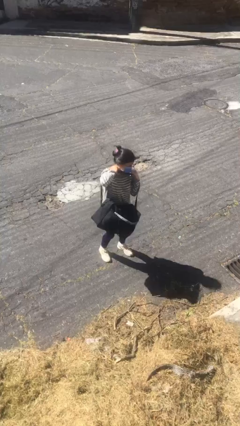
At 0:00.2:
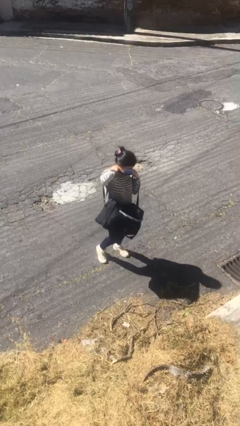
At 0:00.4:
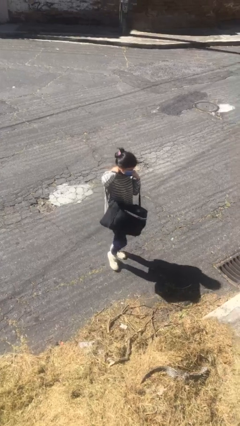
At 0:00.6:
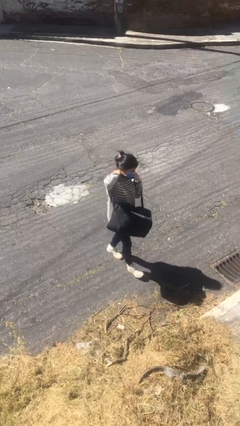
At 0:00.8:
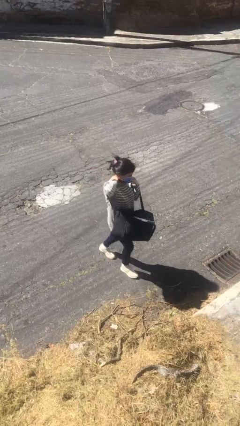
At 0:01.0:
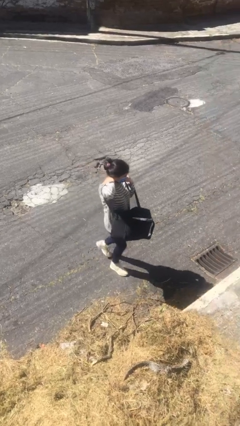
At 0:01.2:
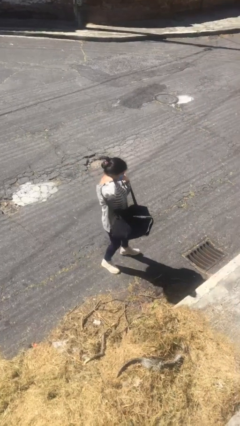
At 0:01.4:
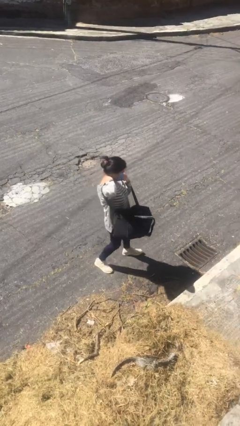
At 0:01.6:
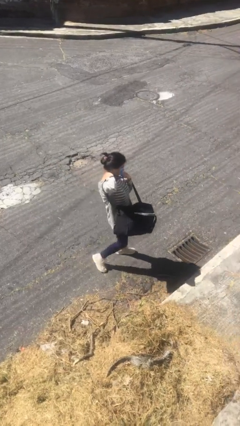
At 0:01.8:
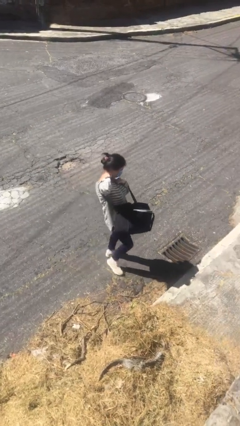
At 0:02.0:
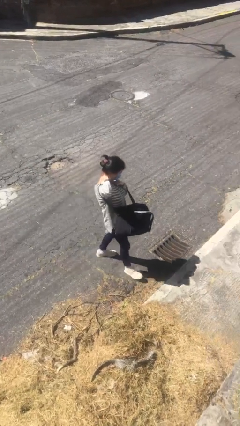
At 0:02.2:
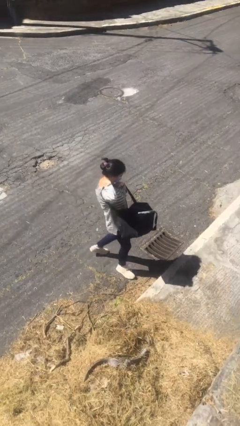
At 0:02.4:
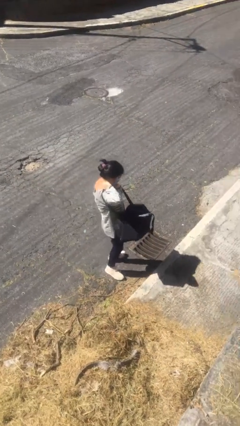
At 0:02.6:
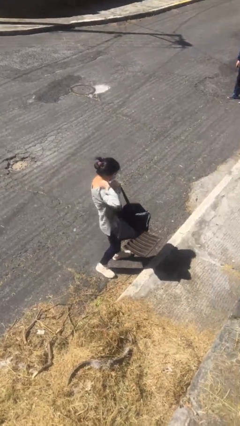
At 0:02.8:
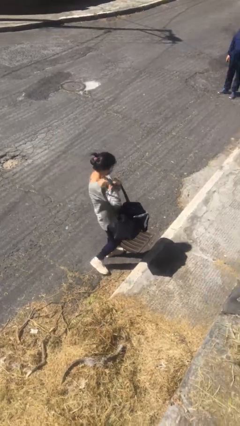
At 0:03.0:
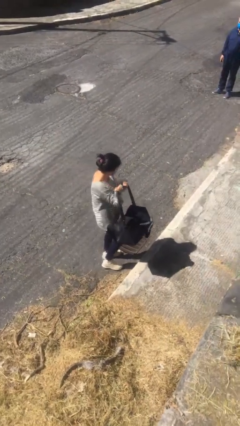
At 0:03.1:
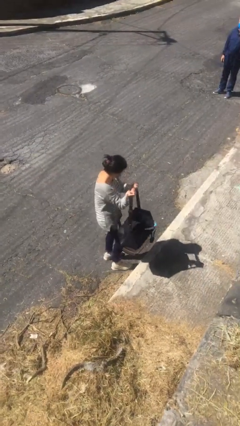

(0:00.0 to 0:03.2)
person carries heavy object

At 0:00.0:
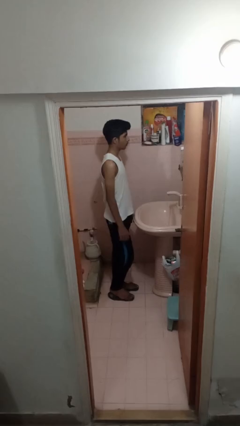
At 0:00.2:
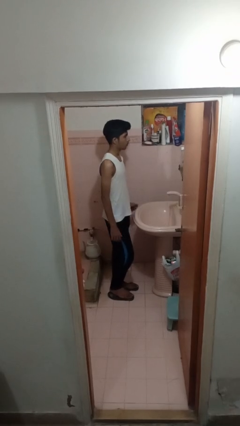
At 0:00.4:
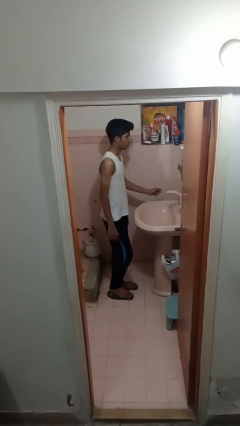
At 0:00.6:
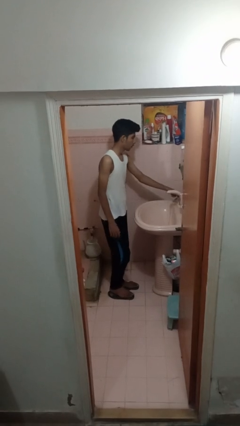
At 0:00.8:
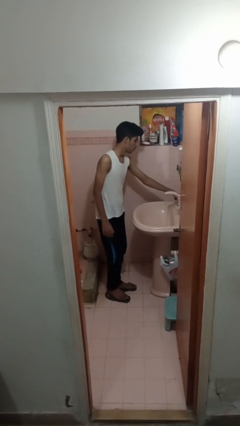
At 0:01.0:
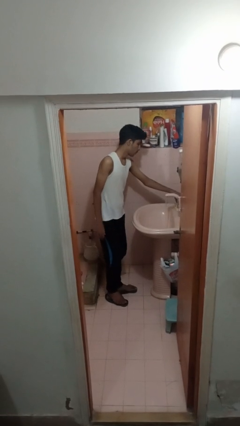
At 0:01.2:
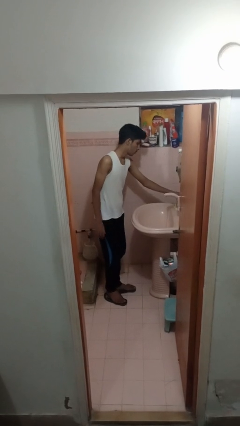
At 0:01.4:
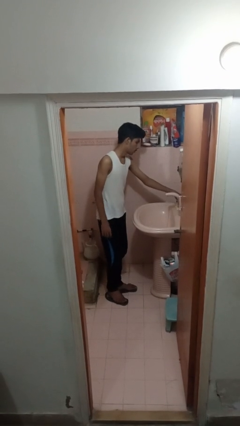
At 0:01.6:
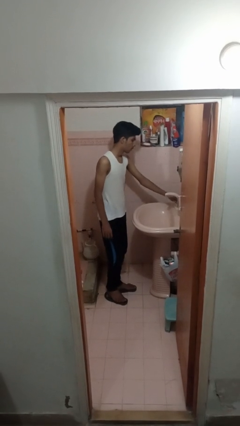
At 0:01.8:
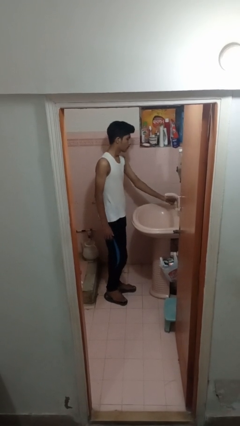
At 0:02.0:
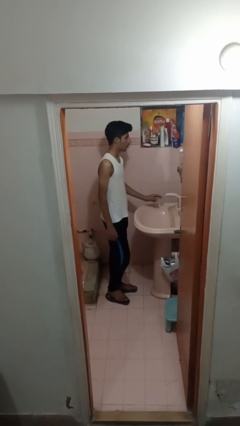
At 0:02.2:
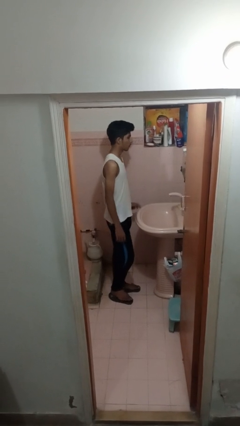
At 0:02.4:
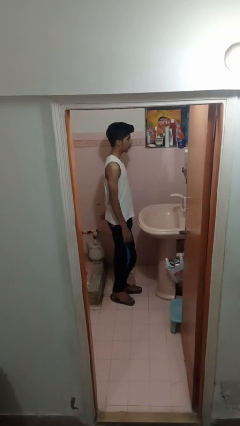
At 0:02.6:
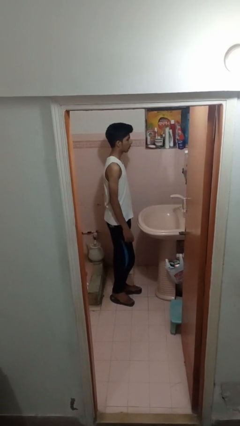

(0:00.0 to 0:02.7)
person turns off faucet

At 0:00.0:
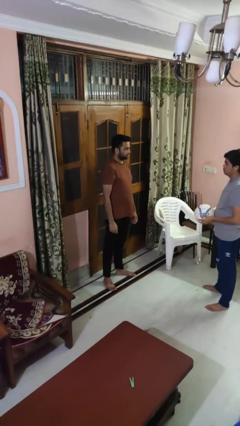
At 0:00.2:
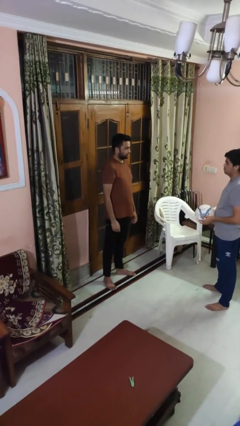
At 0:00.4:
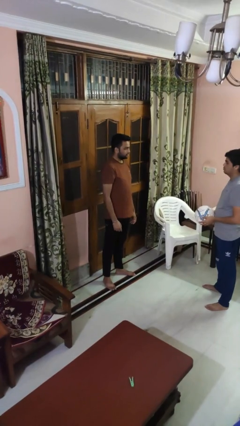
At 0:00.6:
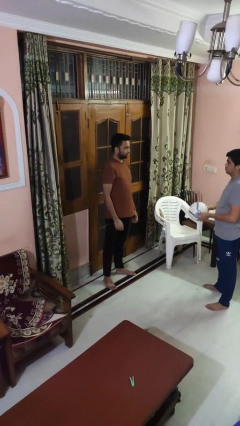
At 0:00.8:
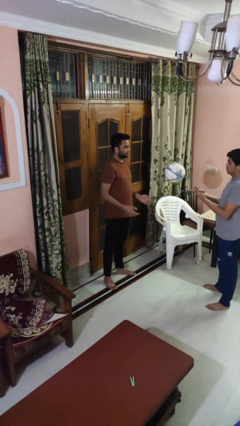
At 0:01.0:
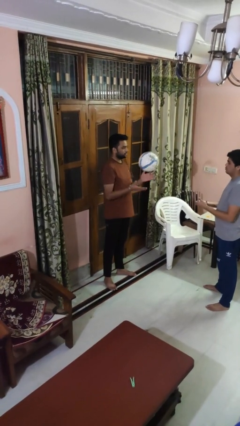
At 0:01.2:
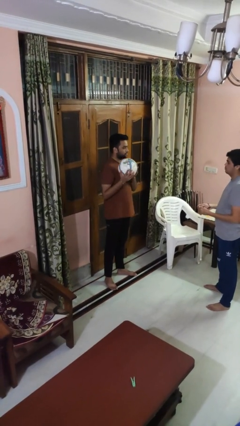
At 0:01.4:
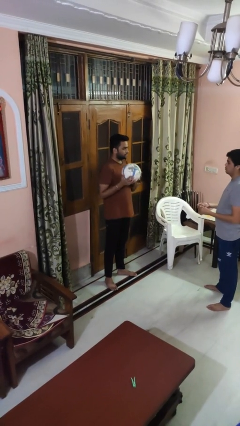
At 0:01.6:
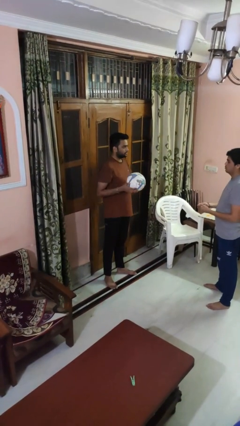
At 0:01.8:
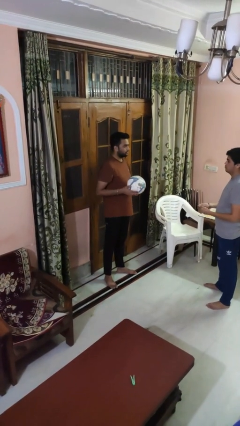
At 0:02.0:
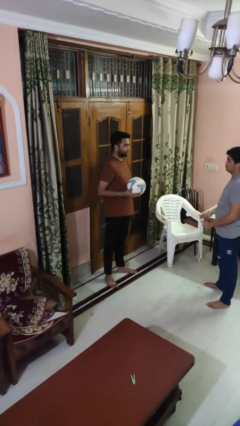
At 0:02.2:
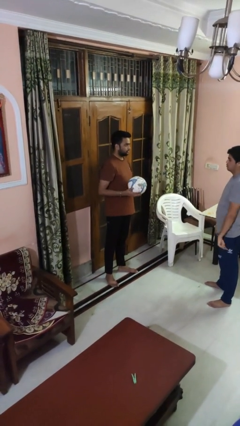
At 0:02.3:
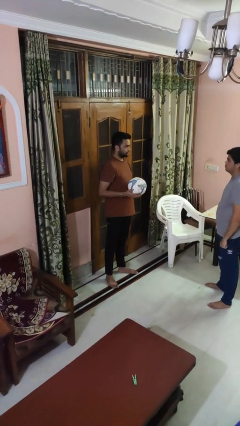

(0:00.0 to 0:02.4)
person catches object from person

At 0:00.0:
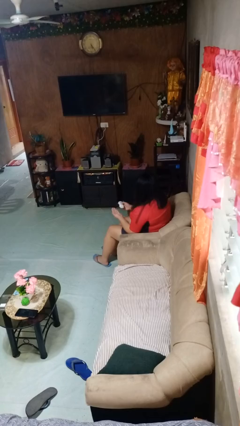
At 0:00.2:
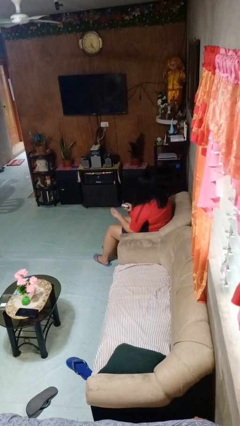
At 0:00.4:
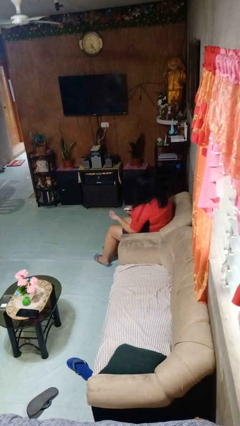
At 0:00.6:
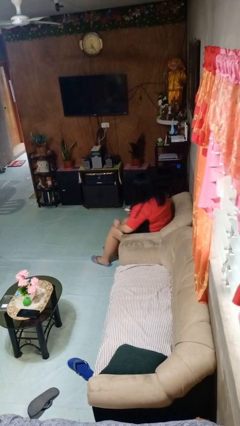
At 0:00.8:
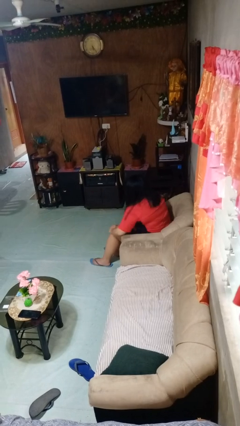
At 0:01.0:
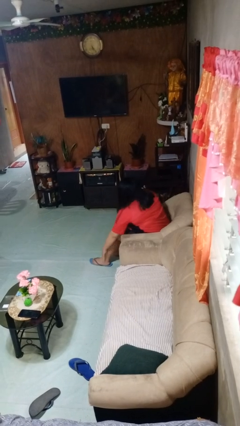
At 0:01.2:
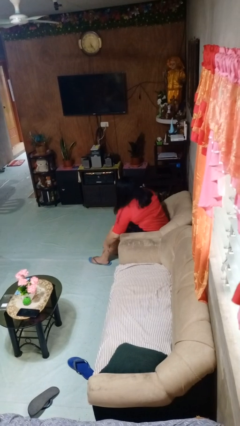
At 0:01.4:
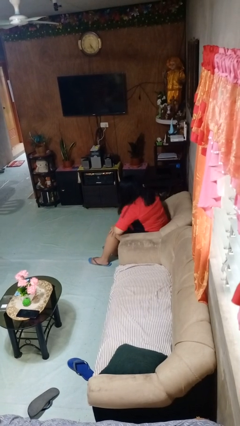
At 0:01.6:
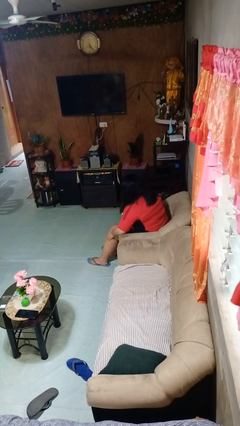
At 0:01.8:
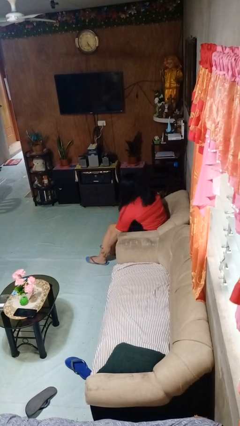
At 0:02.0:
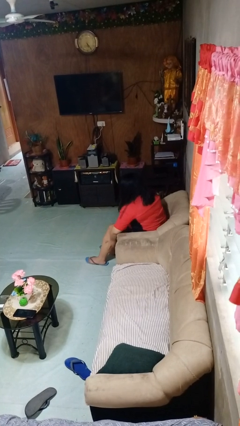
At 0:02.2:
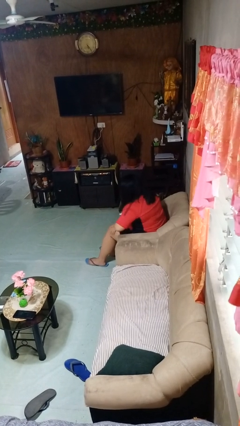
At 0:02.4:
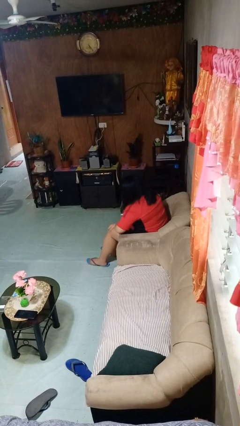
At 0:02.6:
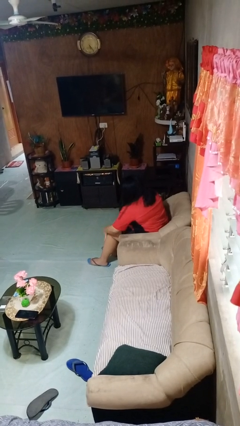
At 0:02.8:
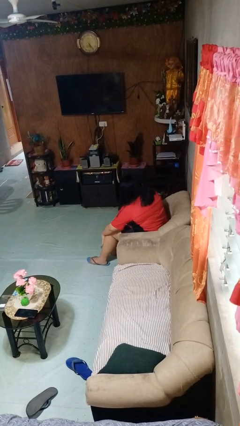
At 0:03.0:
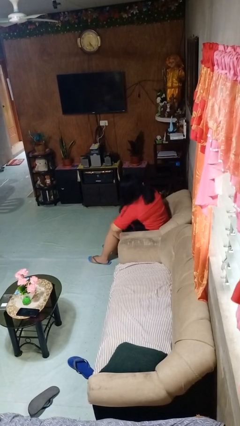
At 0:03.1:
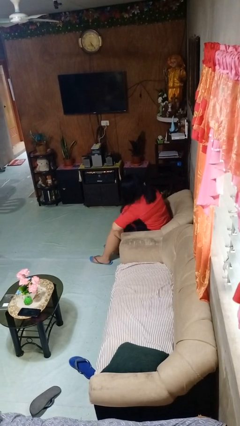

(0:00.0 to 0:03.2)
person applies sunscreen

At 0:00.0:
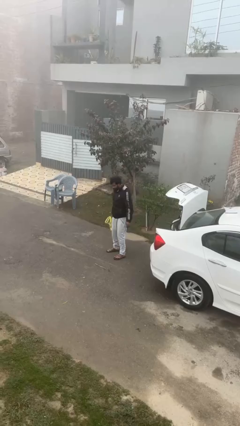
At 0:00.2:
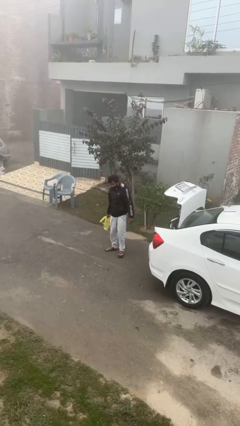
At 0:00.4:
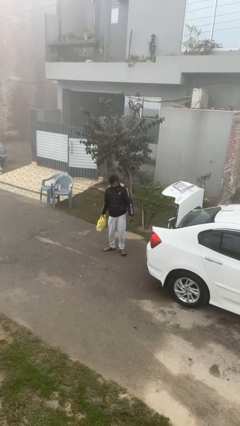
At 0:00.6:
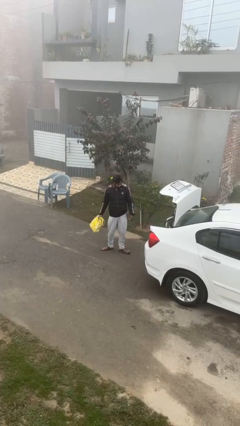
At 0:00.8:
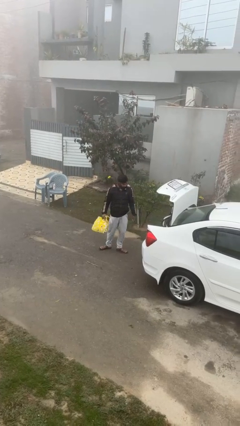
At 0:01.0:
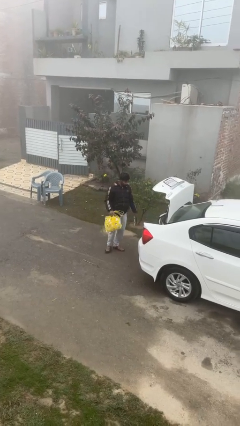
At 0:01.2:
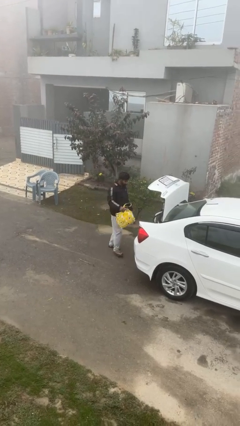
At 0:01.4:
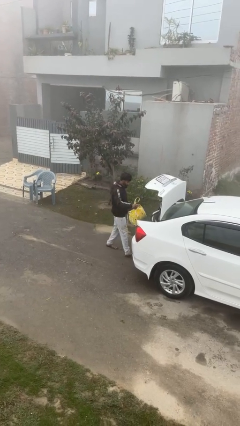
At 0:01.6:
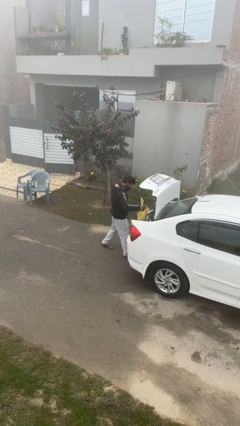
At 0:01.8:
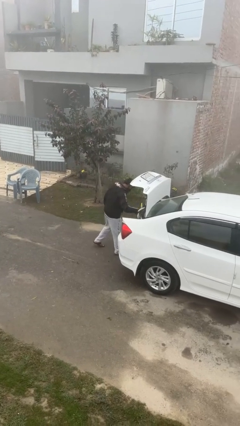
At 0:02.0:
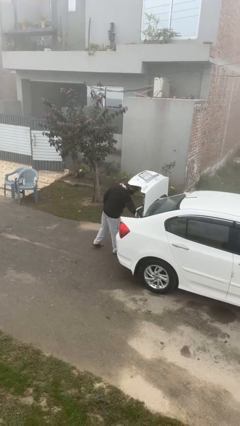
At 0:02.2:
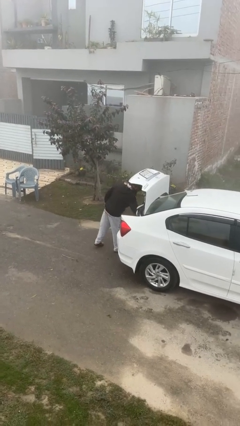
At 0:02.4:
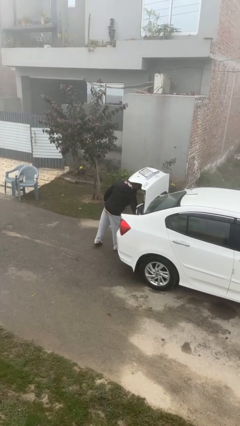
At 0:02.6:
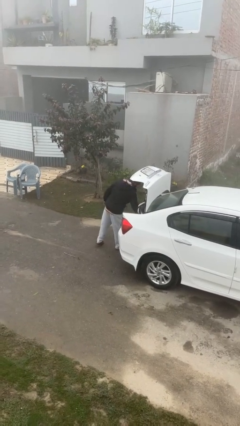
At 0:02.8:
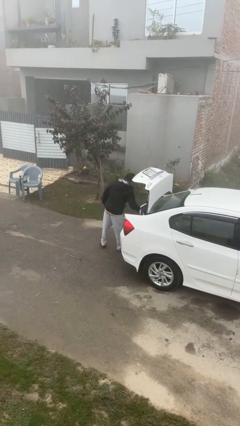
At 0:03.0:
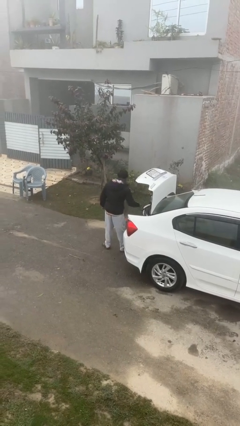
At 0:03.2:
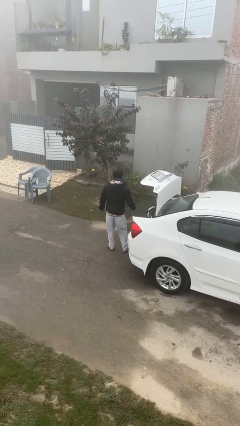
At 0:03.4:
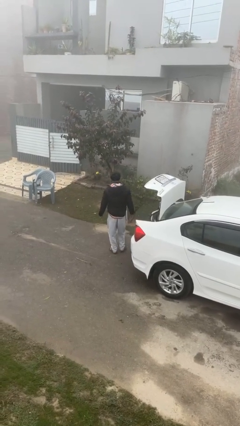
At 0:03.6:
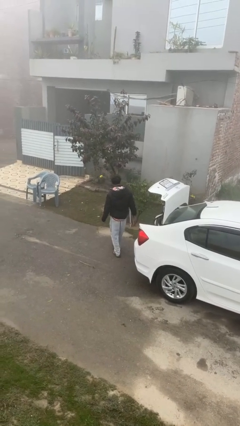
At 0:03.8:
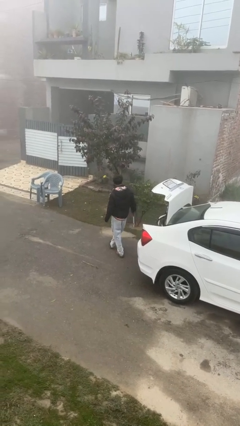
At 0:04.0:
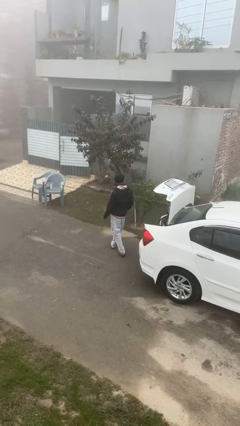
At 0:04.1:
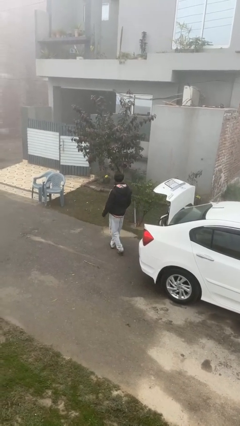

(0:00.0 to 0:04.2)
person loads car

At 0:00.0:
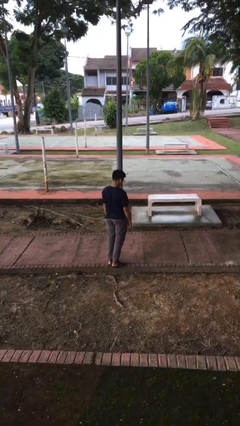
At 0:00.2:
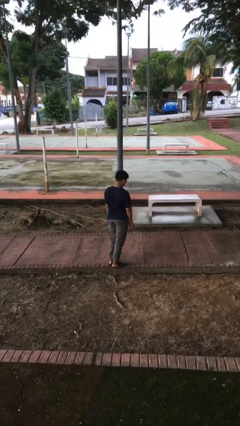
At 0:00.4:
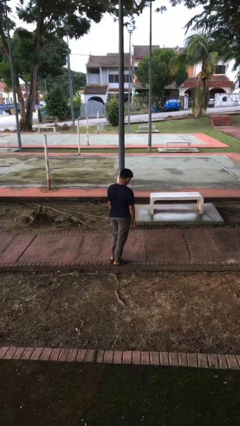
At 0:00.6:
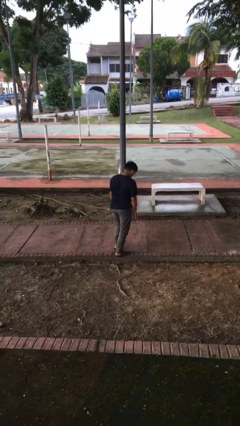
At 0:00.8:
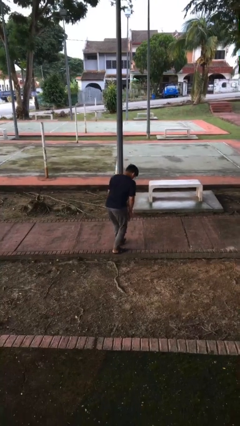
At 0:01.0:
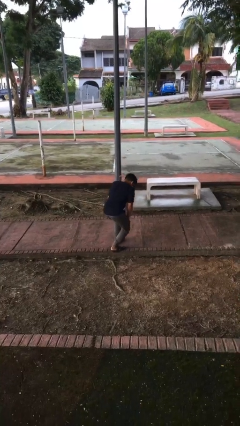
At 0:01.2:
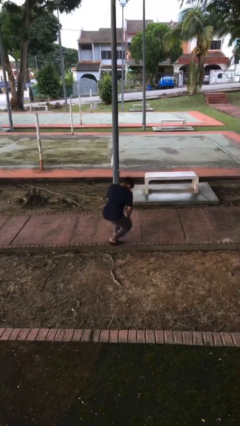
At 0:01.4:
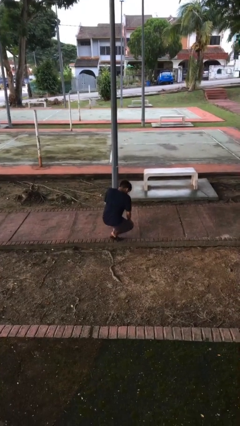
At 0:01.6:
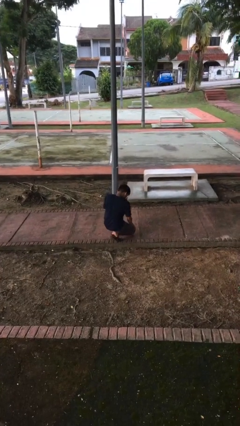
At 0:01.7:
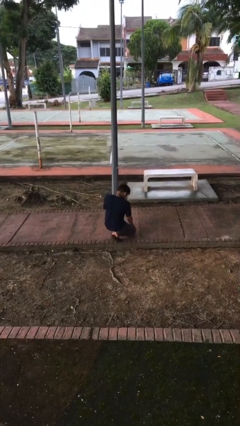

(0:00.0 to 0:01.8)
person kneels
